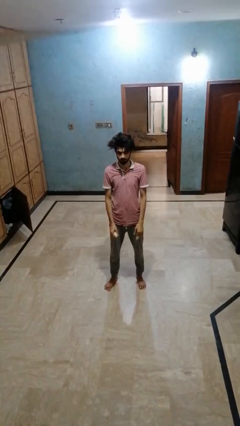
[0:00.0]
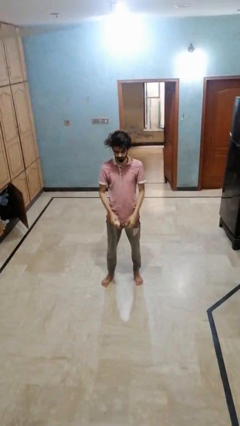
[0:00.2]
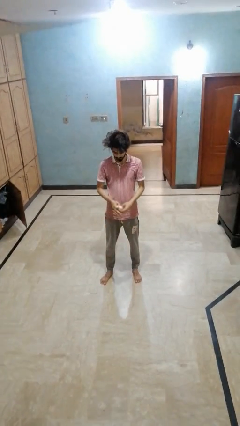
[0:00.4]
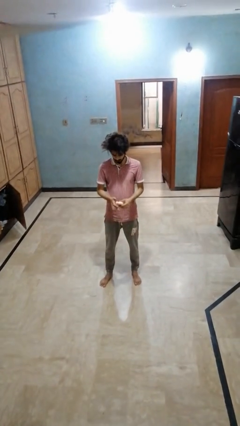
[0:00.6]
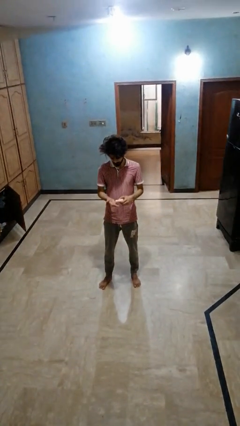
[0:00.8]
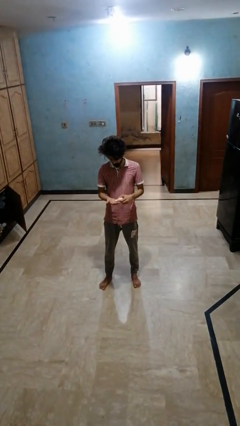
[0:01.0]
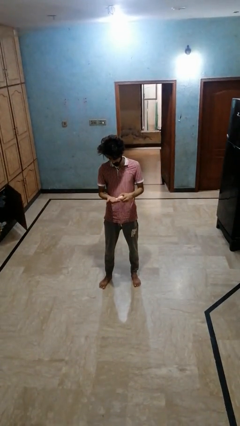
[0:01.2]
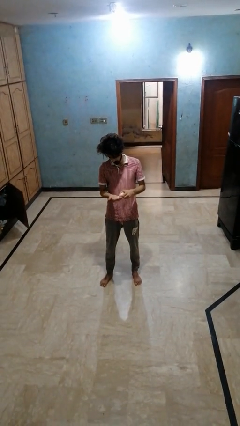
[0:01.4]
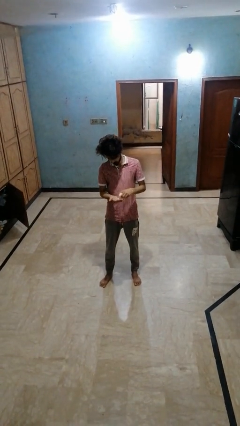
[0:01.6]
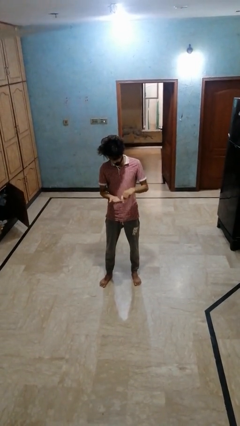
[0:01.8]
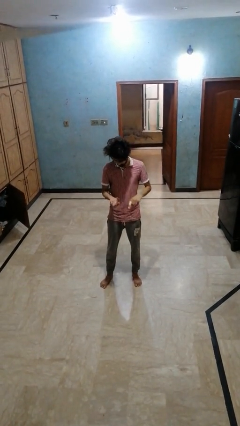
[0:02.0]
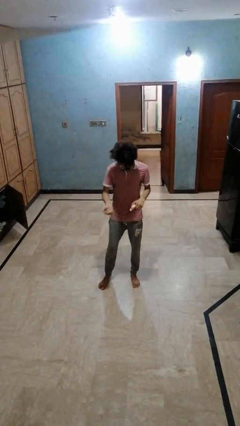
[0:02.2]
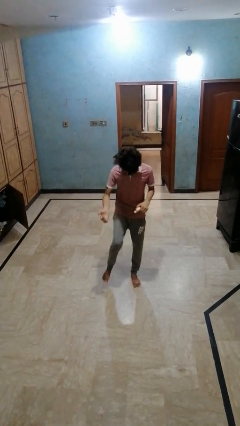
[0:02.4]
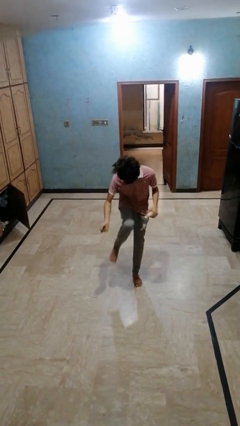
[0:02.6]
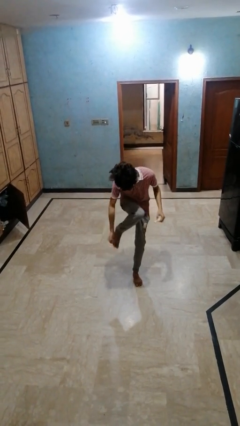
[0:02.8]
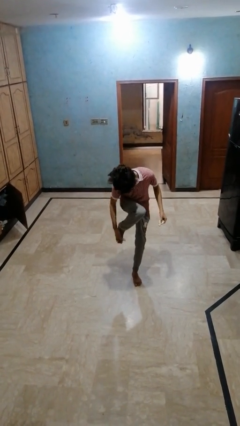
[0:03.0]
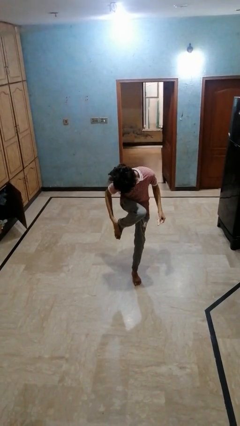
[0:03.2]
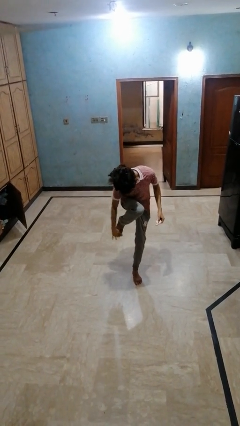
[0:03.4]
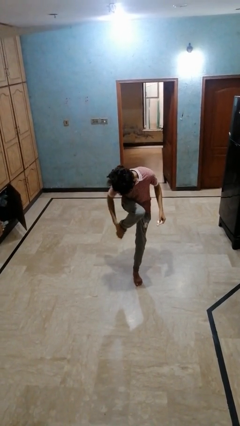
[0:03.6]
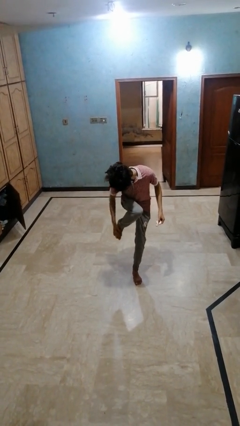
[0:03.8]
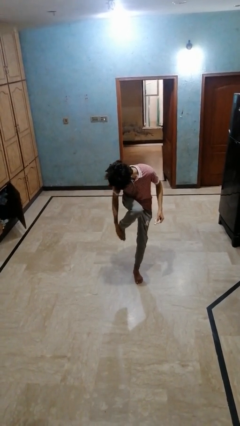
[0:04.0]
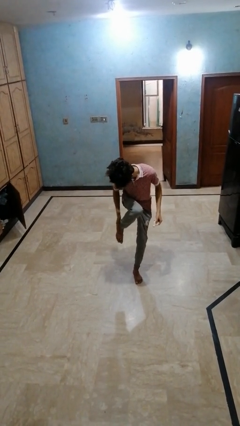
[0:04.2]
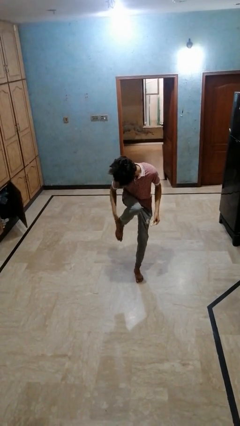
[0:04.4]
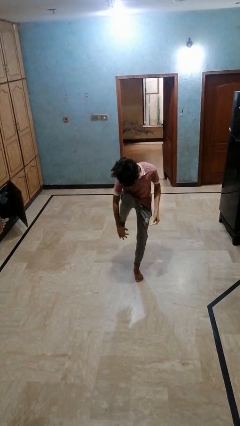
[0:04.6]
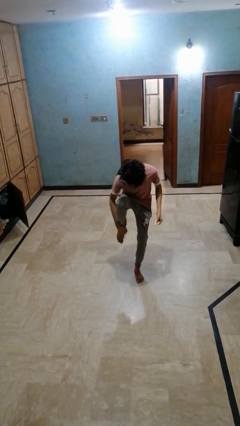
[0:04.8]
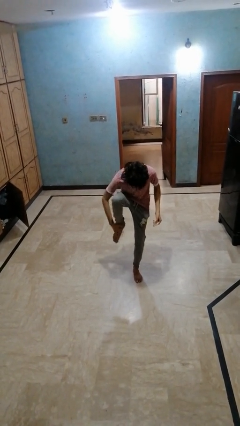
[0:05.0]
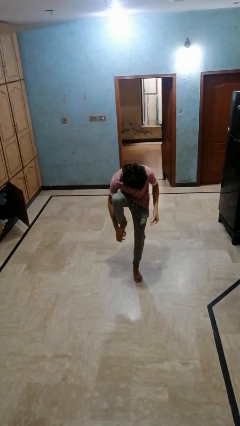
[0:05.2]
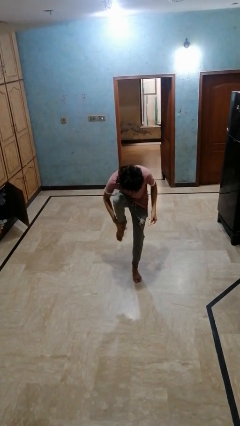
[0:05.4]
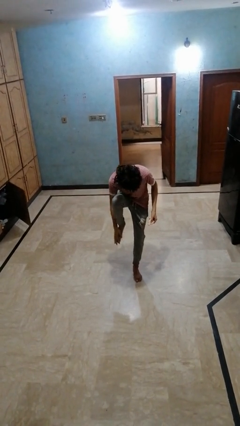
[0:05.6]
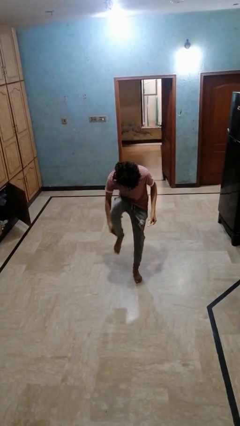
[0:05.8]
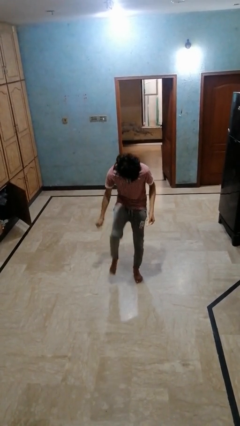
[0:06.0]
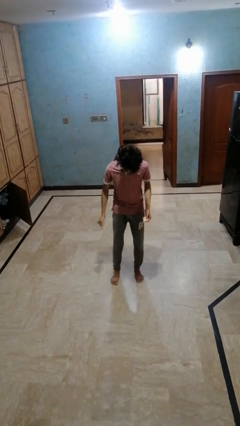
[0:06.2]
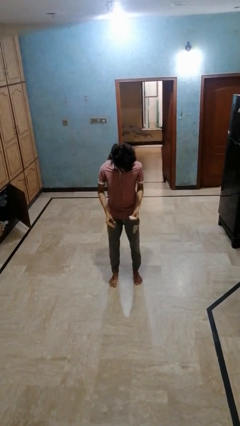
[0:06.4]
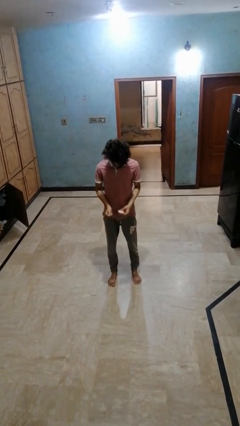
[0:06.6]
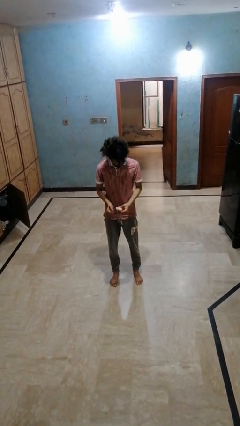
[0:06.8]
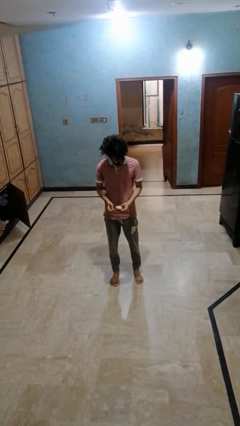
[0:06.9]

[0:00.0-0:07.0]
person applies sunscreen

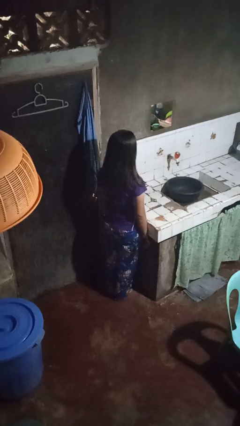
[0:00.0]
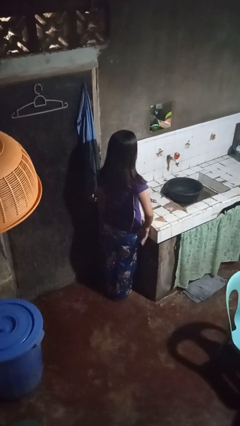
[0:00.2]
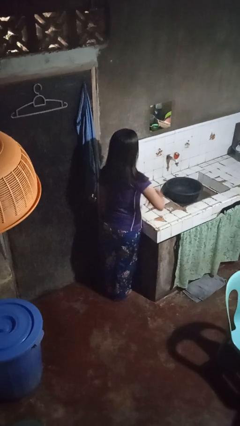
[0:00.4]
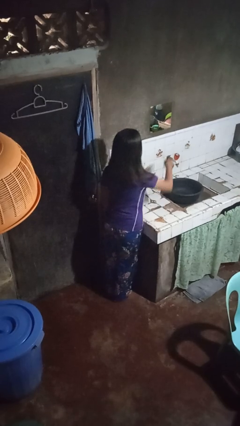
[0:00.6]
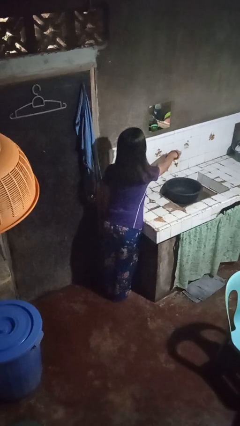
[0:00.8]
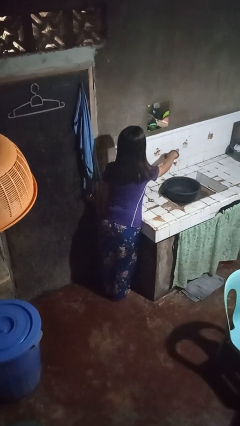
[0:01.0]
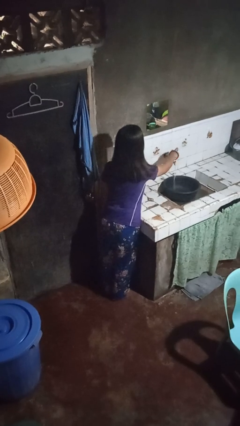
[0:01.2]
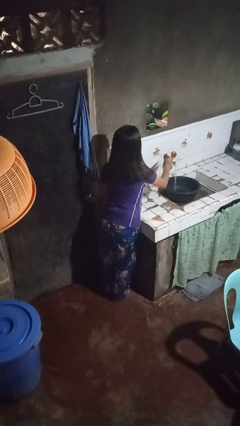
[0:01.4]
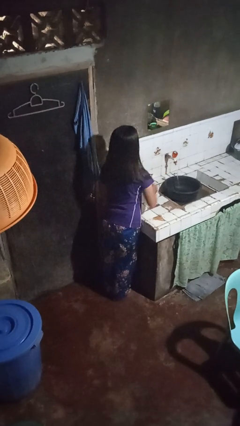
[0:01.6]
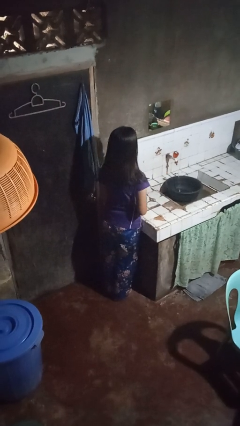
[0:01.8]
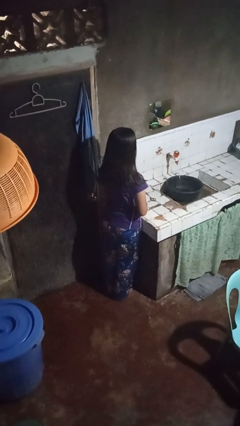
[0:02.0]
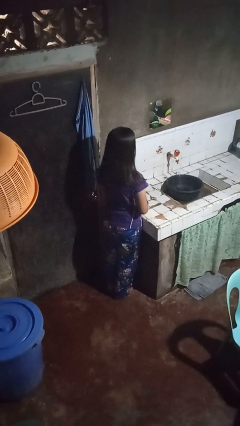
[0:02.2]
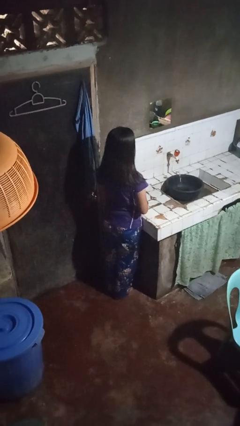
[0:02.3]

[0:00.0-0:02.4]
person turns on faucet

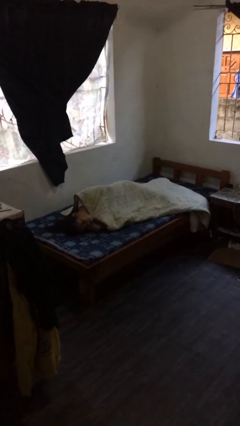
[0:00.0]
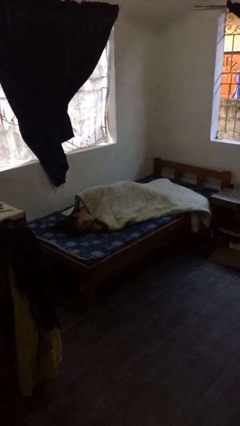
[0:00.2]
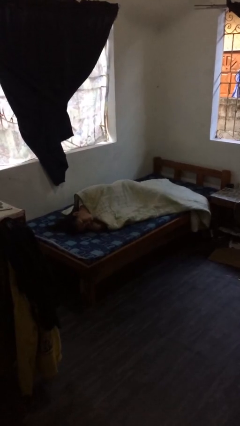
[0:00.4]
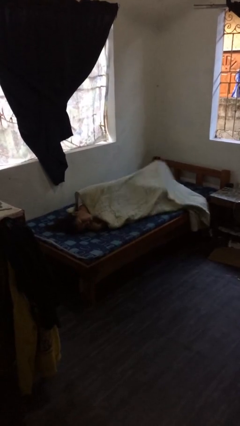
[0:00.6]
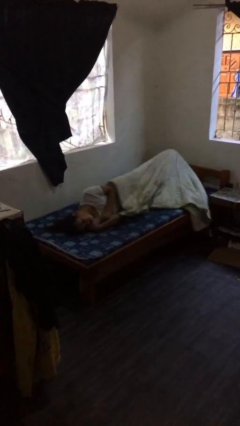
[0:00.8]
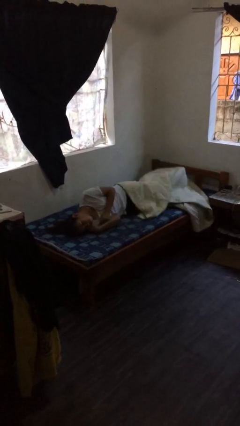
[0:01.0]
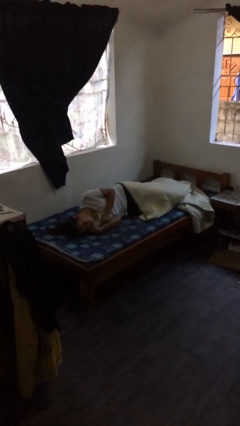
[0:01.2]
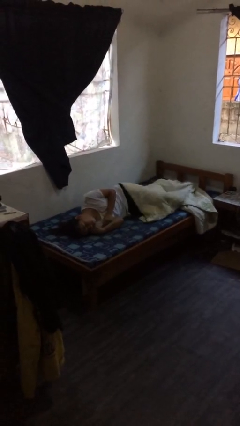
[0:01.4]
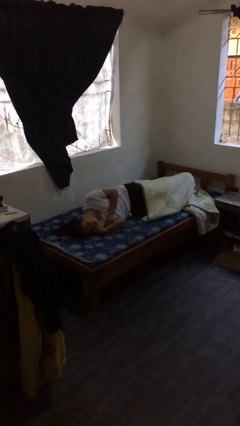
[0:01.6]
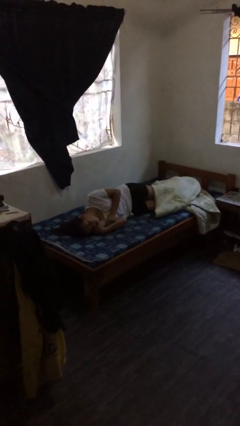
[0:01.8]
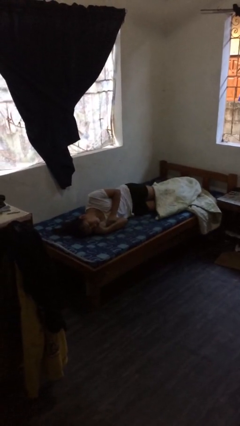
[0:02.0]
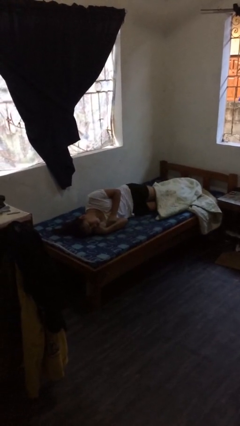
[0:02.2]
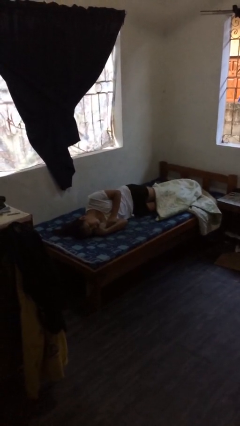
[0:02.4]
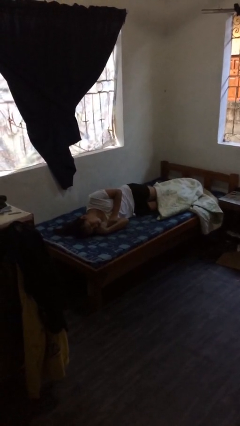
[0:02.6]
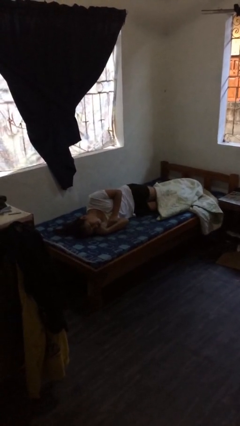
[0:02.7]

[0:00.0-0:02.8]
person uncovers with bedsheets

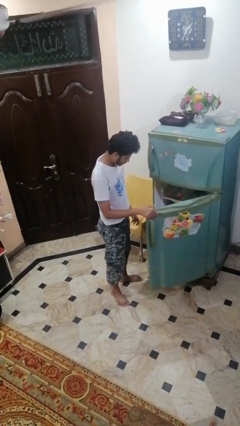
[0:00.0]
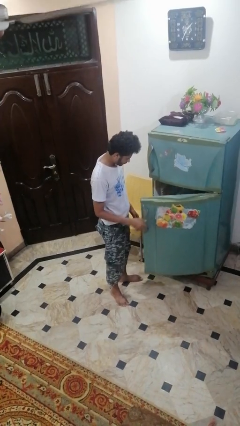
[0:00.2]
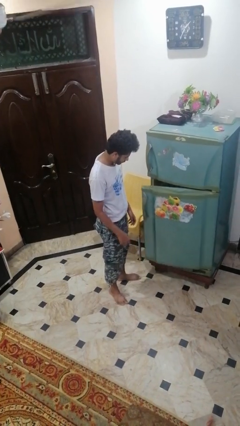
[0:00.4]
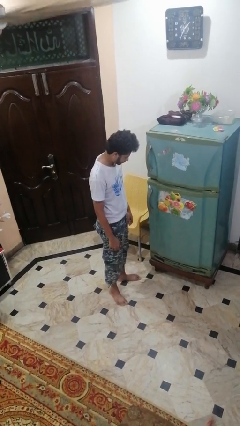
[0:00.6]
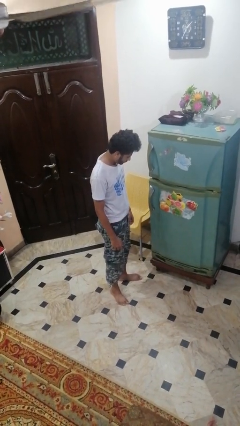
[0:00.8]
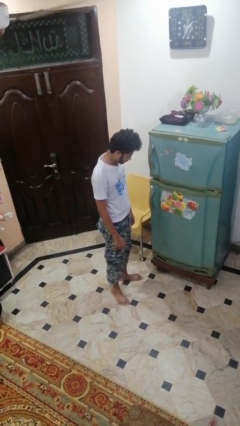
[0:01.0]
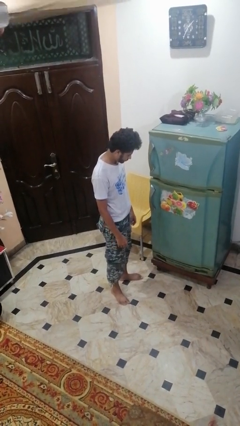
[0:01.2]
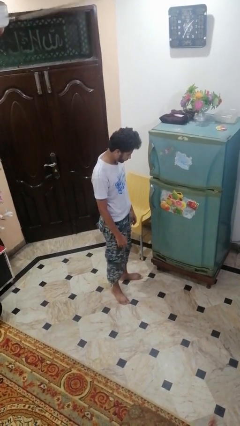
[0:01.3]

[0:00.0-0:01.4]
person closes refrigerator

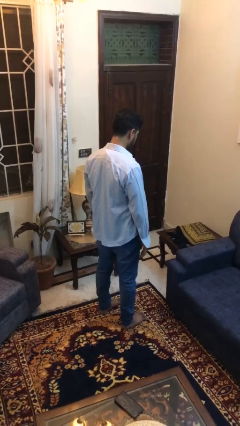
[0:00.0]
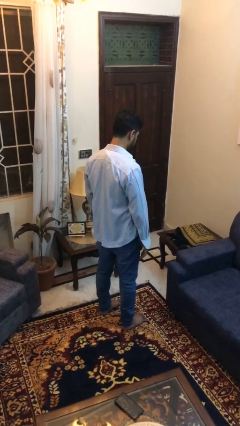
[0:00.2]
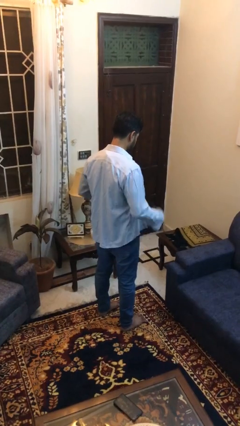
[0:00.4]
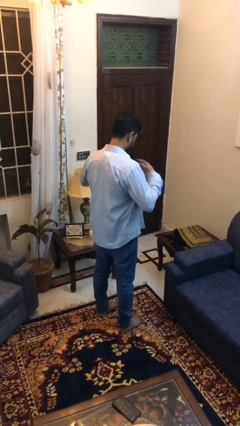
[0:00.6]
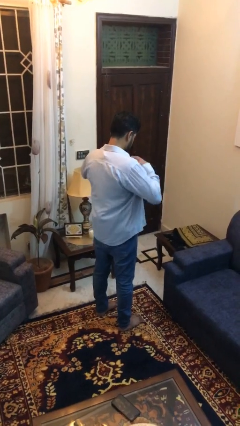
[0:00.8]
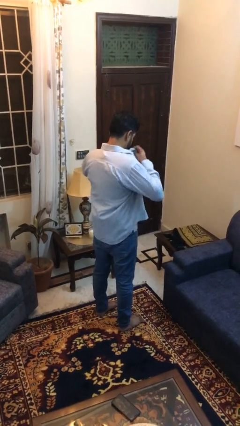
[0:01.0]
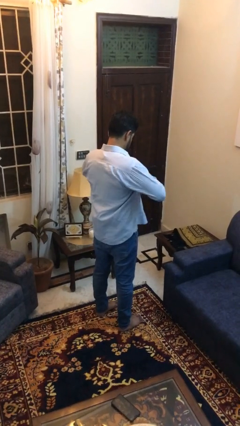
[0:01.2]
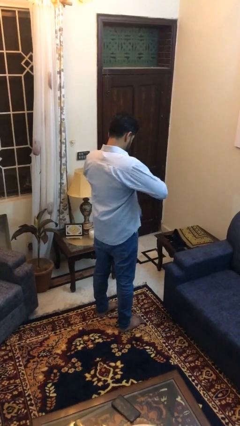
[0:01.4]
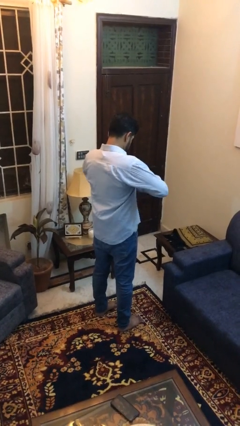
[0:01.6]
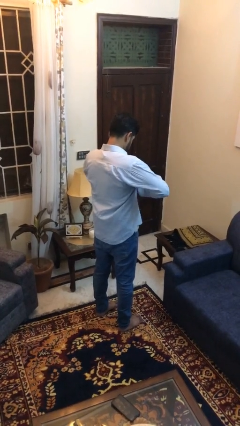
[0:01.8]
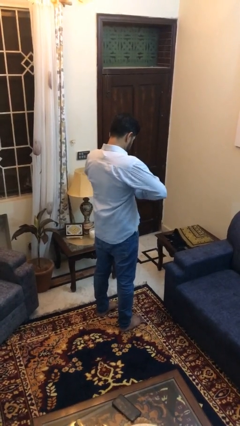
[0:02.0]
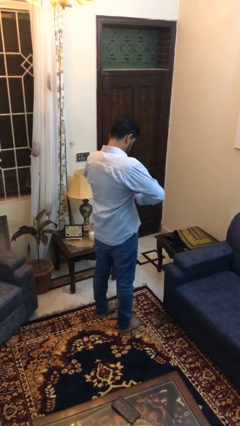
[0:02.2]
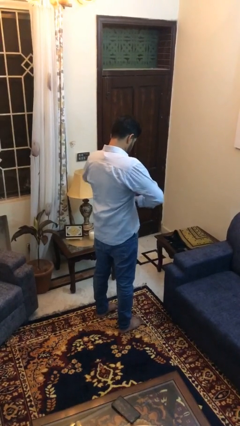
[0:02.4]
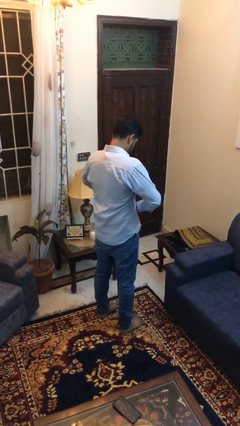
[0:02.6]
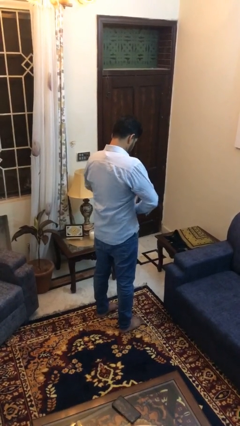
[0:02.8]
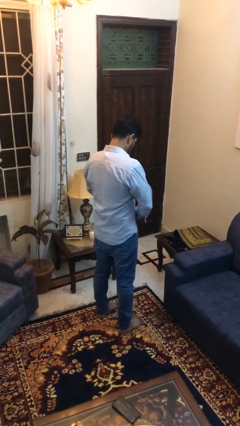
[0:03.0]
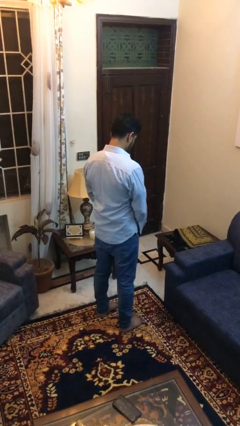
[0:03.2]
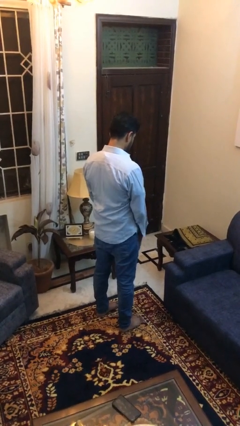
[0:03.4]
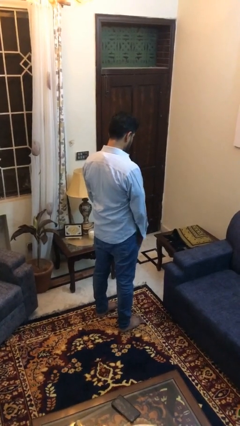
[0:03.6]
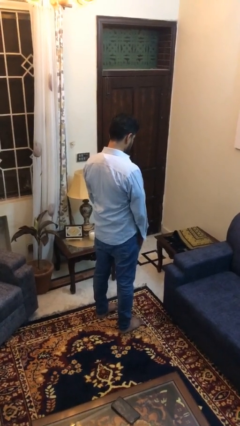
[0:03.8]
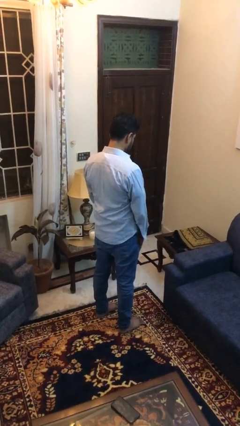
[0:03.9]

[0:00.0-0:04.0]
person buttons shirt
